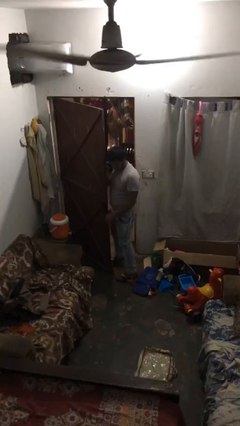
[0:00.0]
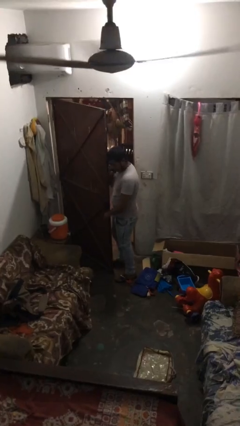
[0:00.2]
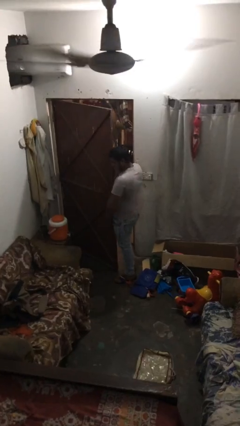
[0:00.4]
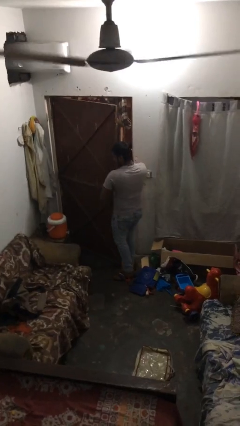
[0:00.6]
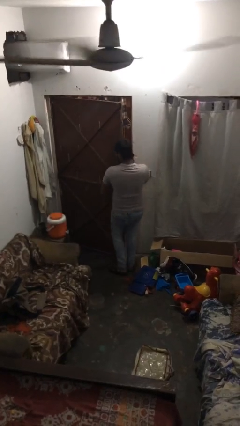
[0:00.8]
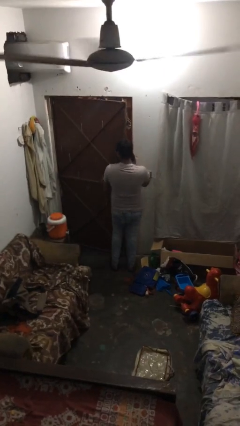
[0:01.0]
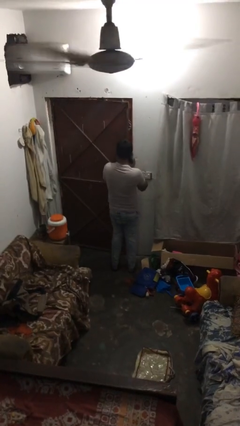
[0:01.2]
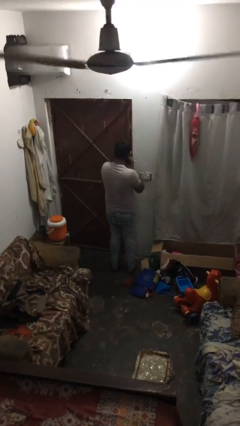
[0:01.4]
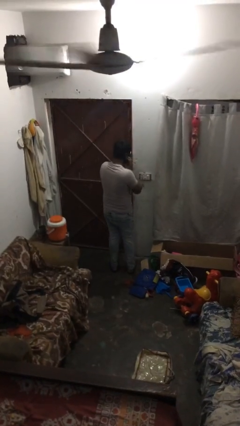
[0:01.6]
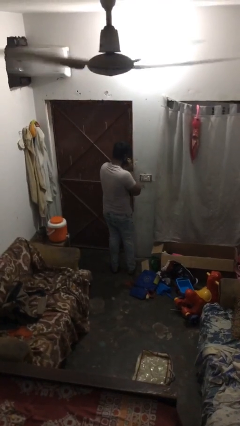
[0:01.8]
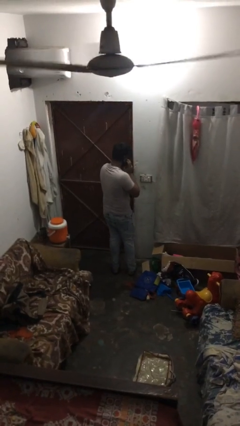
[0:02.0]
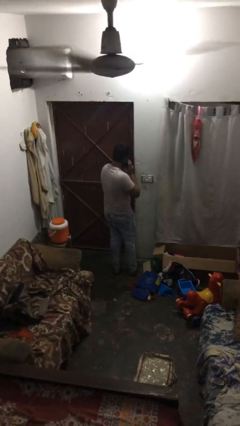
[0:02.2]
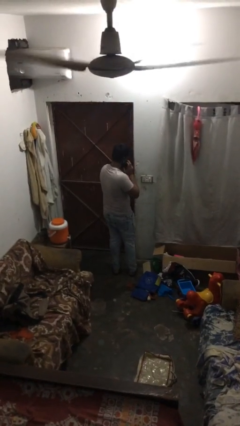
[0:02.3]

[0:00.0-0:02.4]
person closes facility door

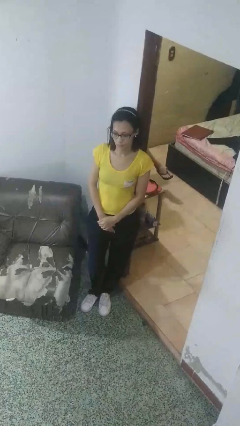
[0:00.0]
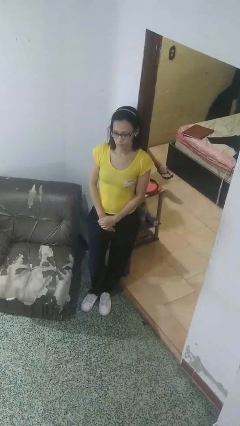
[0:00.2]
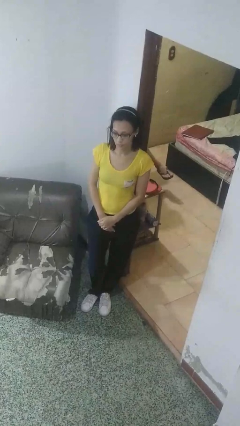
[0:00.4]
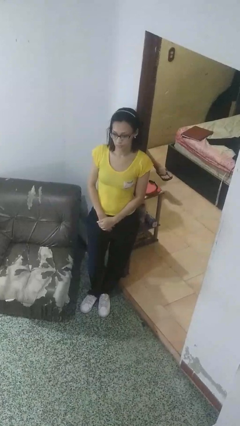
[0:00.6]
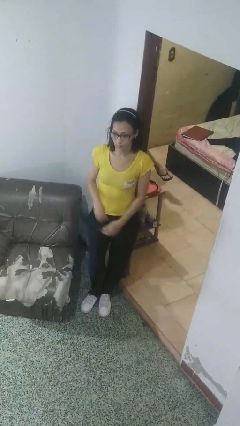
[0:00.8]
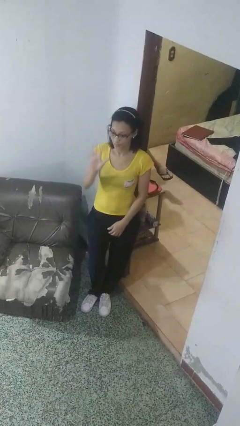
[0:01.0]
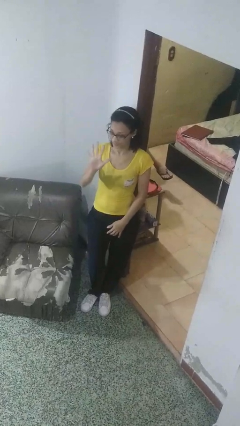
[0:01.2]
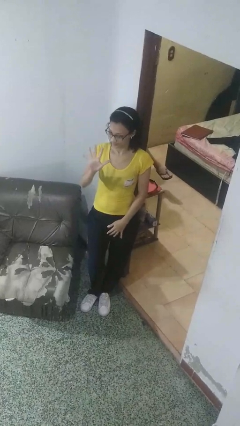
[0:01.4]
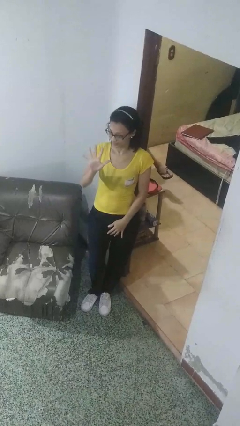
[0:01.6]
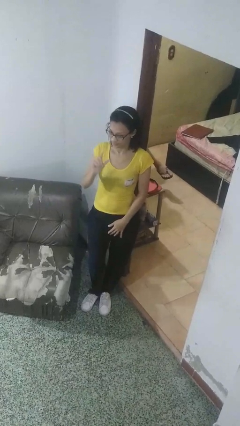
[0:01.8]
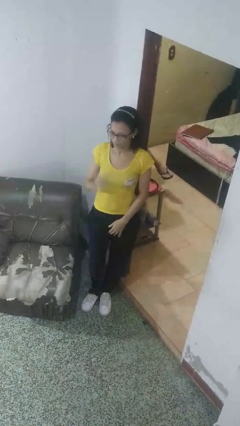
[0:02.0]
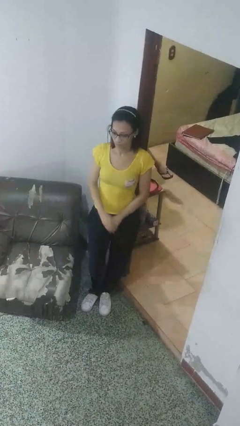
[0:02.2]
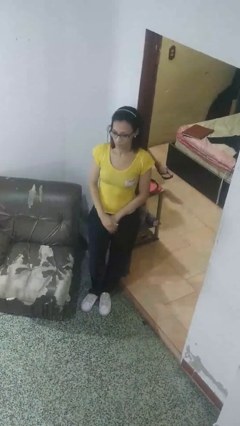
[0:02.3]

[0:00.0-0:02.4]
person gestures number five

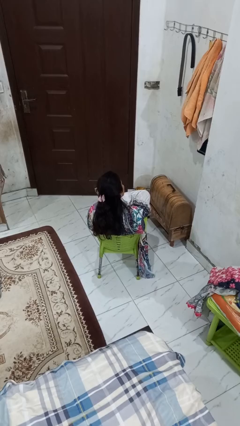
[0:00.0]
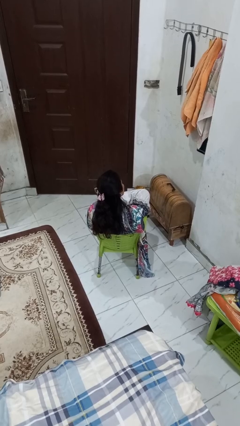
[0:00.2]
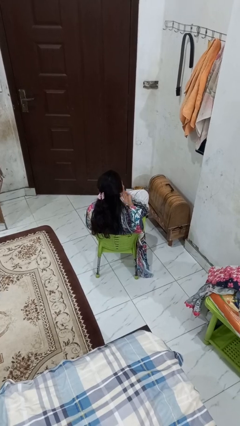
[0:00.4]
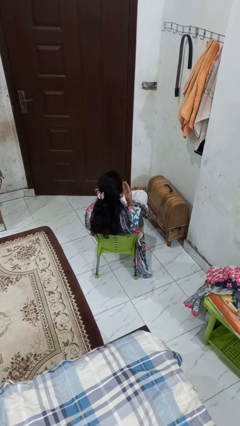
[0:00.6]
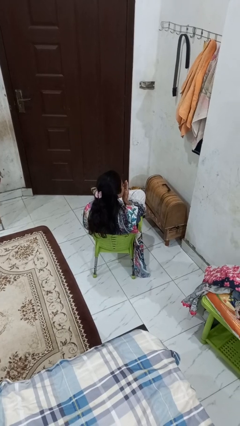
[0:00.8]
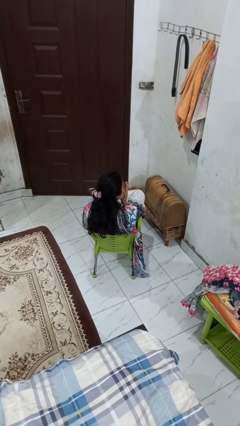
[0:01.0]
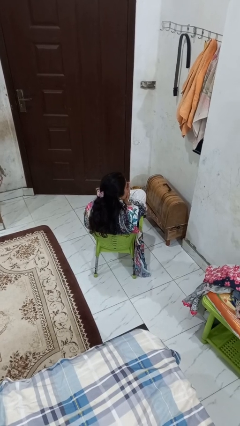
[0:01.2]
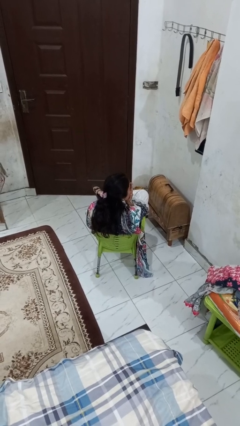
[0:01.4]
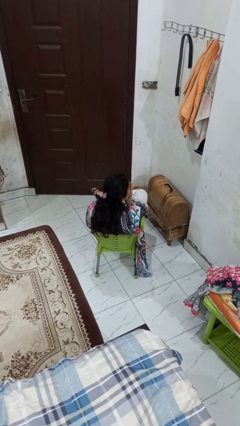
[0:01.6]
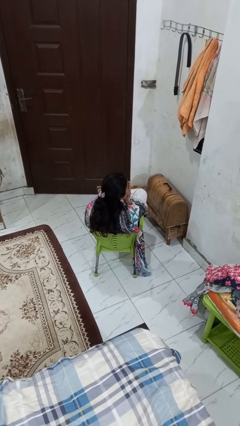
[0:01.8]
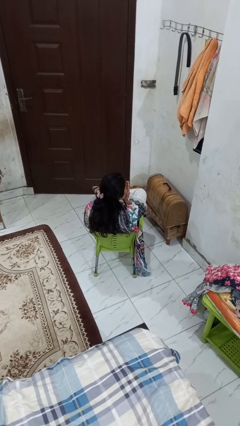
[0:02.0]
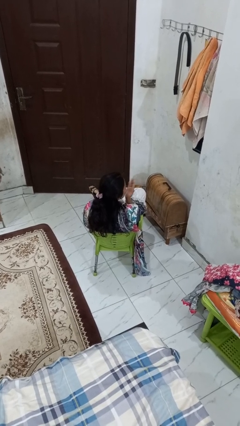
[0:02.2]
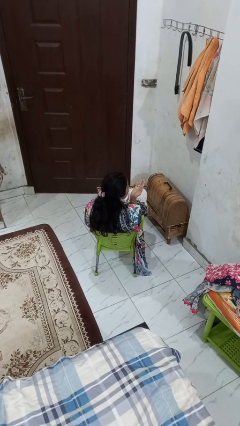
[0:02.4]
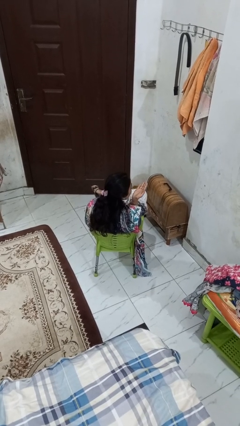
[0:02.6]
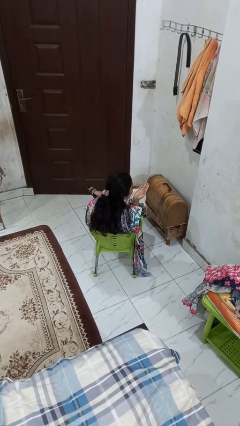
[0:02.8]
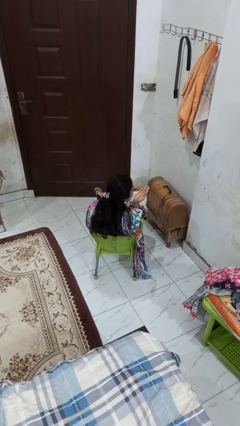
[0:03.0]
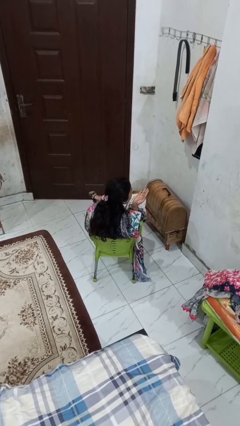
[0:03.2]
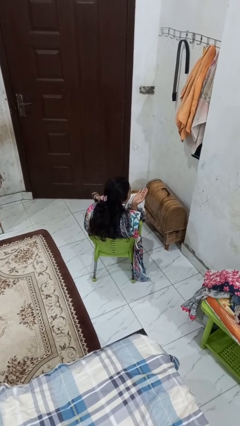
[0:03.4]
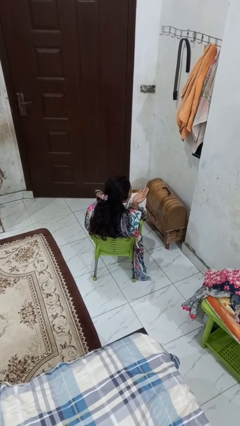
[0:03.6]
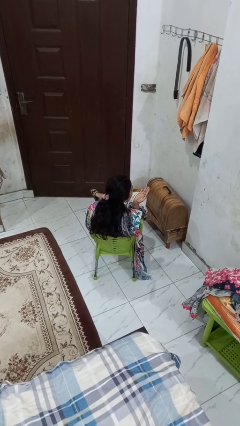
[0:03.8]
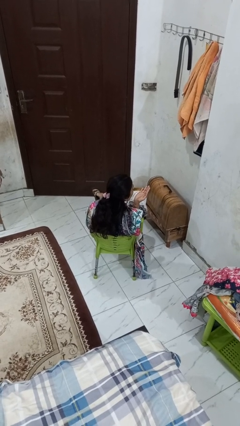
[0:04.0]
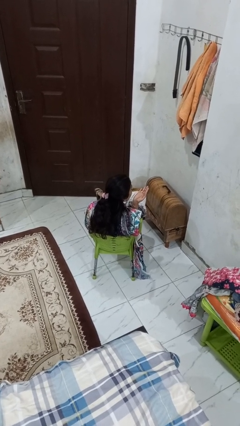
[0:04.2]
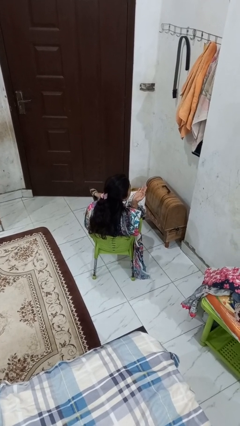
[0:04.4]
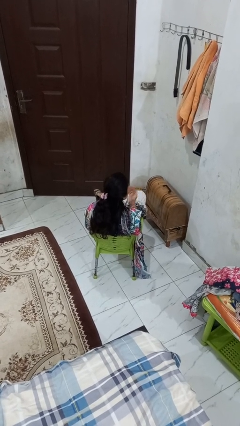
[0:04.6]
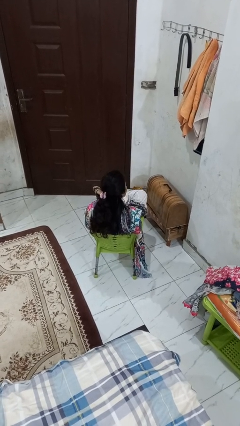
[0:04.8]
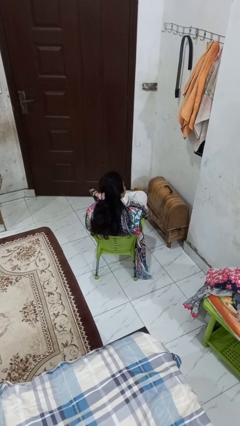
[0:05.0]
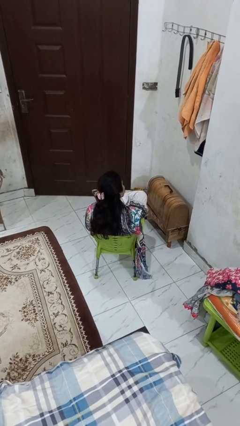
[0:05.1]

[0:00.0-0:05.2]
person gestures blow kiss

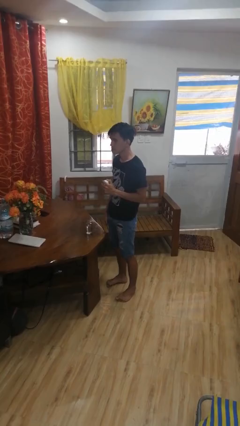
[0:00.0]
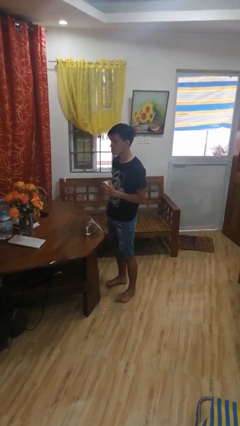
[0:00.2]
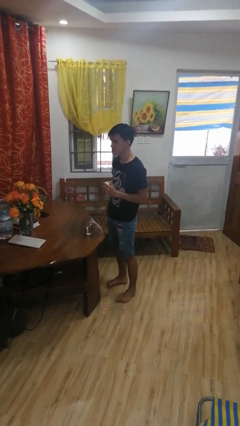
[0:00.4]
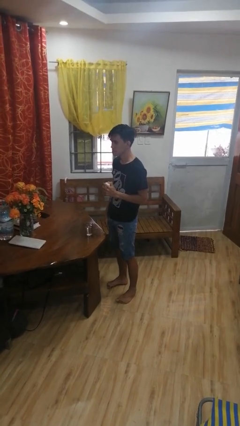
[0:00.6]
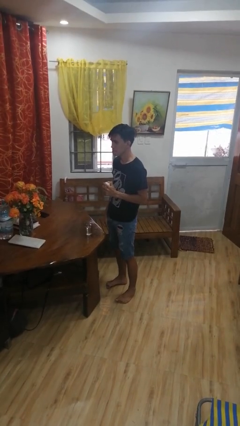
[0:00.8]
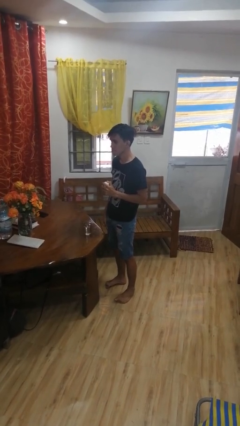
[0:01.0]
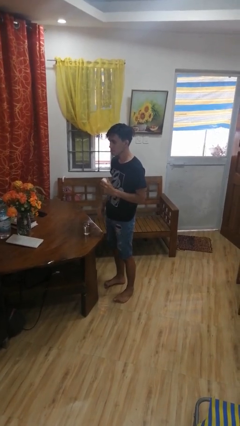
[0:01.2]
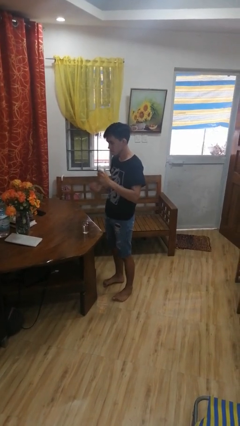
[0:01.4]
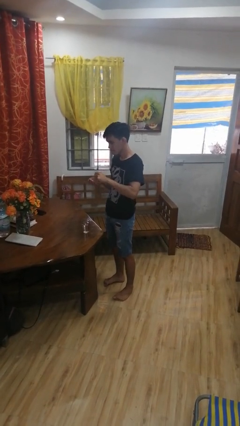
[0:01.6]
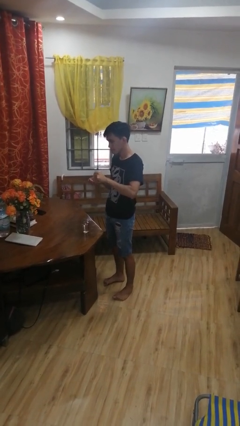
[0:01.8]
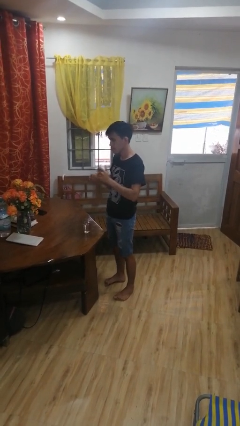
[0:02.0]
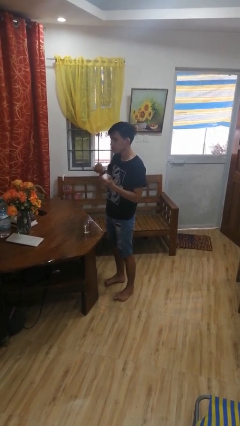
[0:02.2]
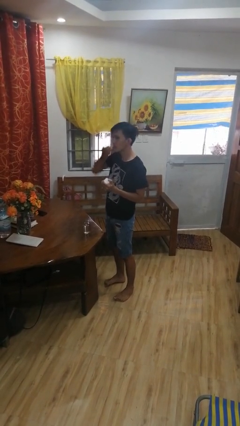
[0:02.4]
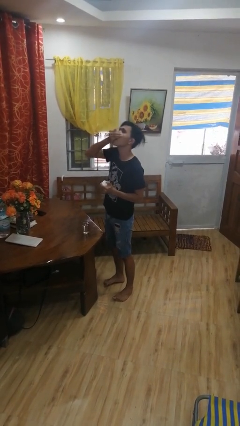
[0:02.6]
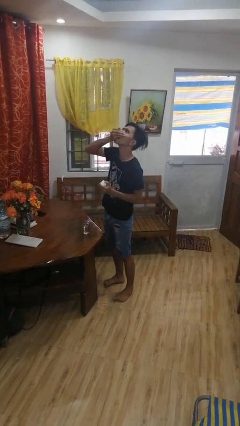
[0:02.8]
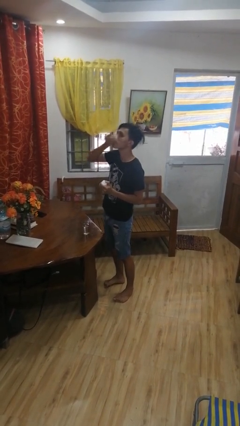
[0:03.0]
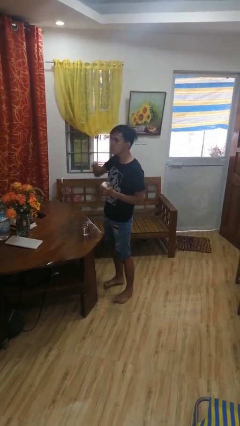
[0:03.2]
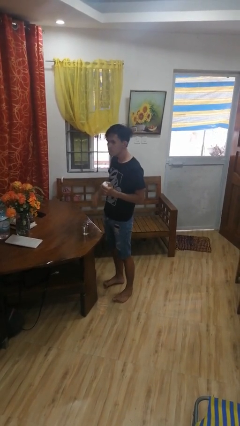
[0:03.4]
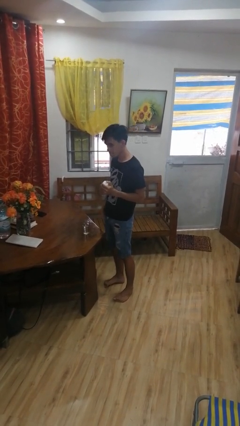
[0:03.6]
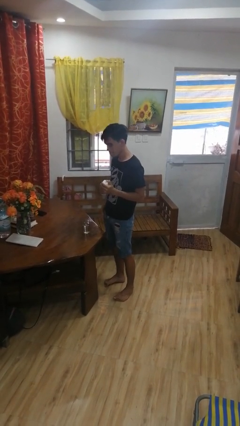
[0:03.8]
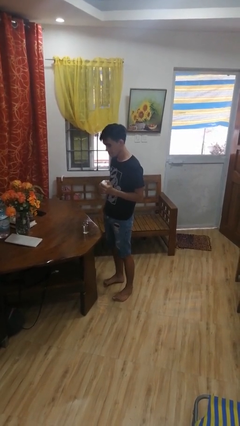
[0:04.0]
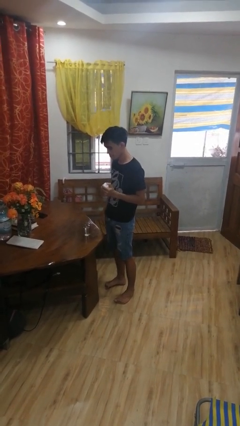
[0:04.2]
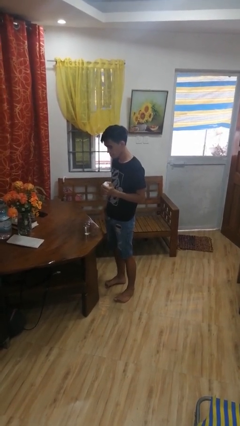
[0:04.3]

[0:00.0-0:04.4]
person takes medicine pills

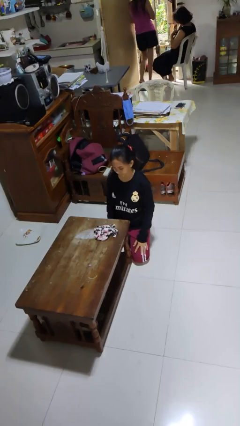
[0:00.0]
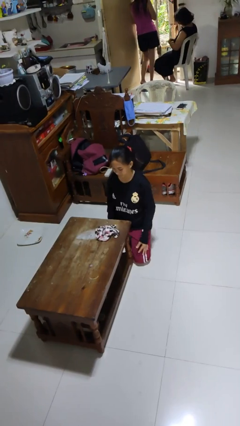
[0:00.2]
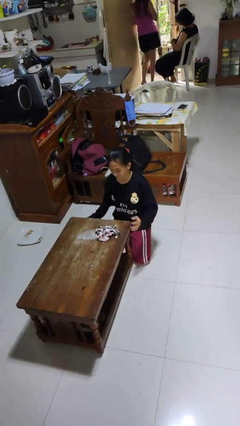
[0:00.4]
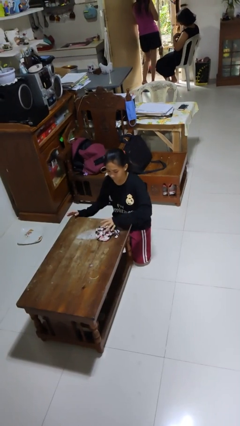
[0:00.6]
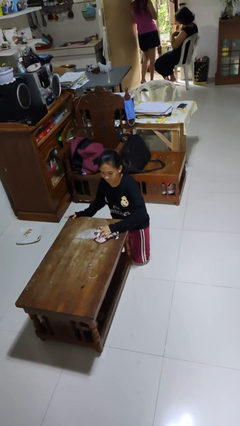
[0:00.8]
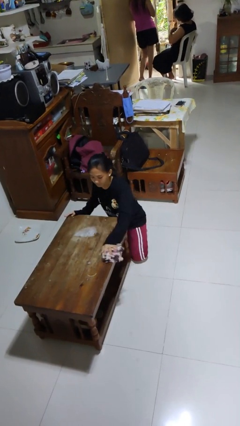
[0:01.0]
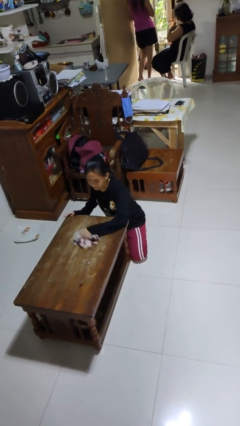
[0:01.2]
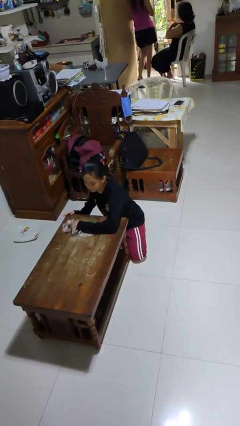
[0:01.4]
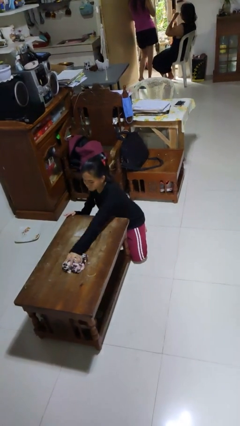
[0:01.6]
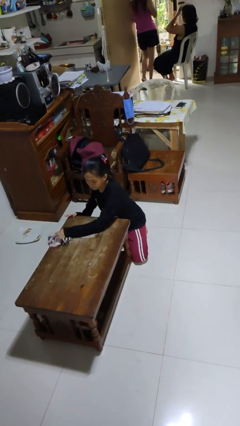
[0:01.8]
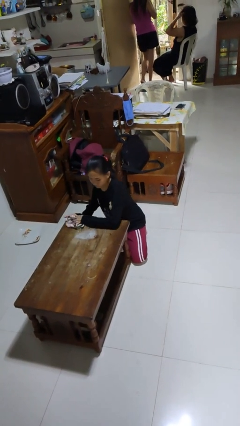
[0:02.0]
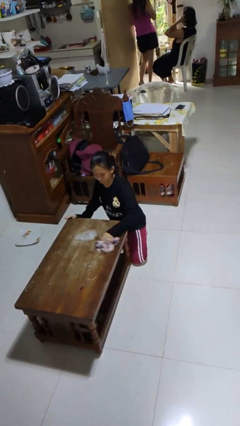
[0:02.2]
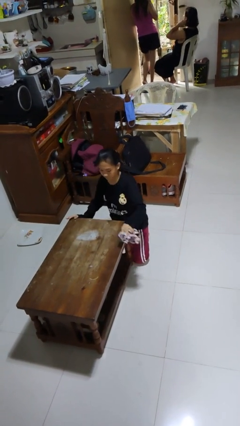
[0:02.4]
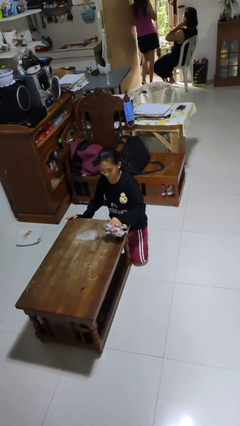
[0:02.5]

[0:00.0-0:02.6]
person cleans table with rag

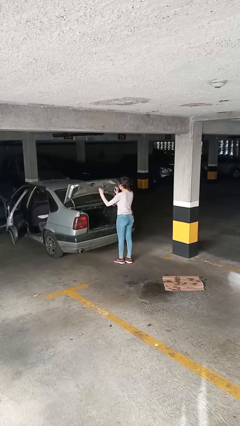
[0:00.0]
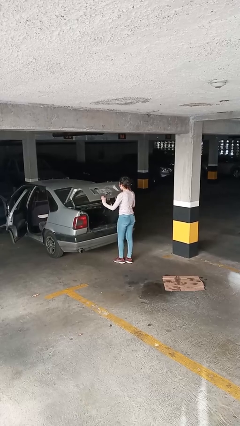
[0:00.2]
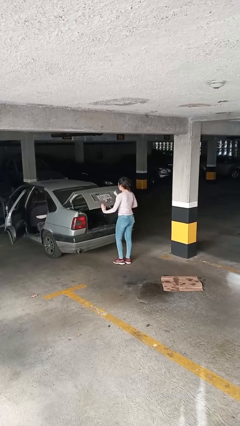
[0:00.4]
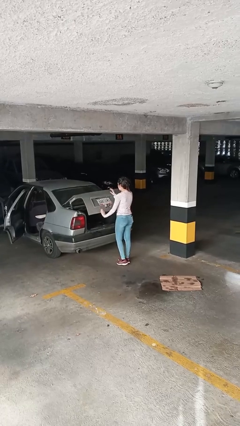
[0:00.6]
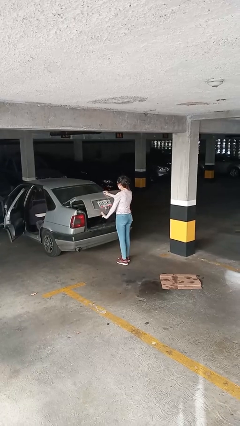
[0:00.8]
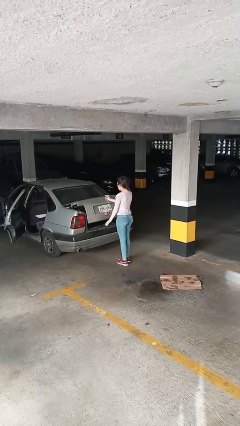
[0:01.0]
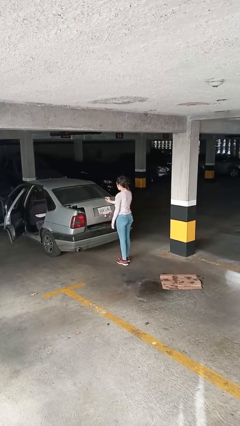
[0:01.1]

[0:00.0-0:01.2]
person closes car trunk
